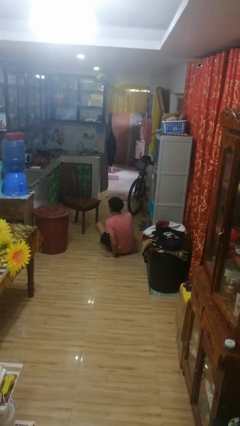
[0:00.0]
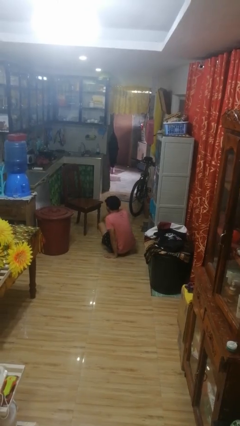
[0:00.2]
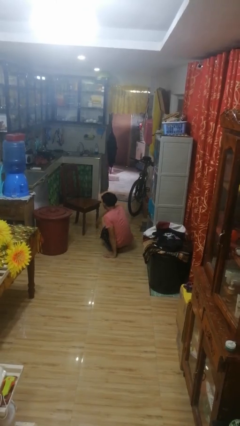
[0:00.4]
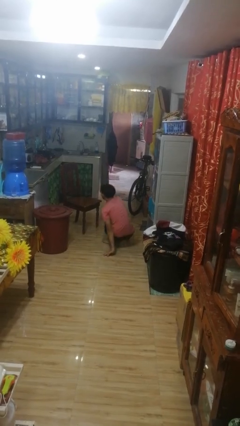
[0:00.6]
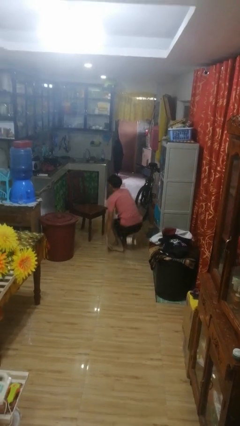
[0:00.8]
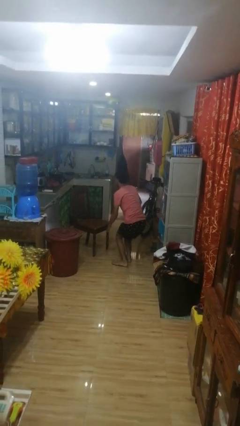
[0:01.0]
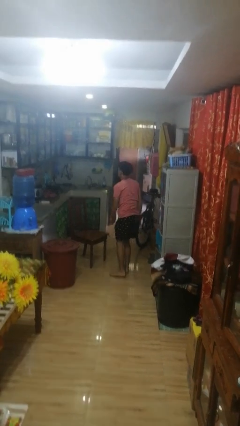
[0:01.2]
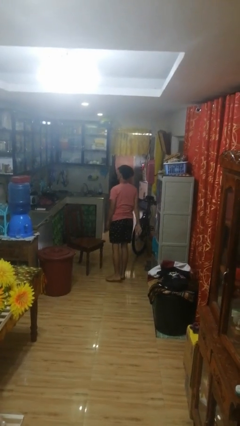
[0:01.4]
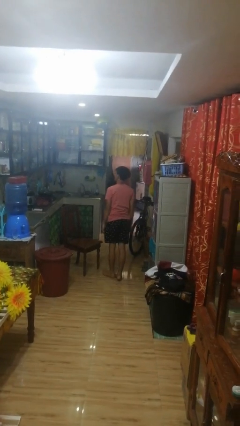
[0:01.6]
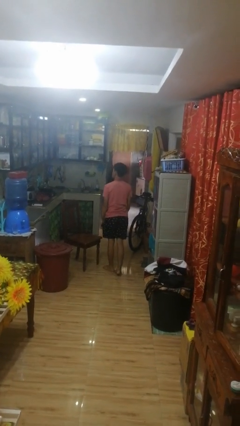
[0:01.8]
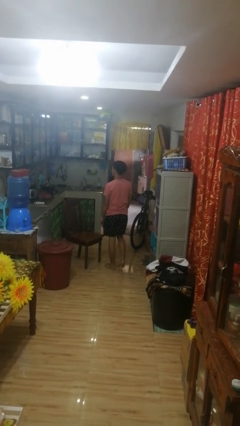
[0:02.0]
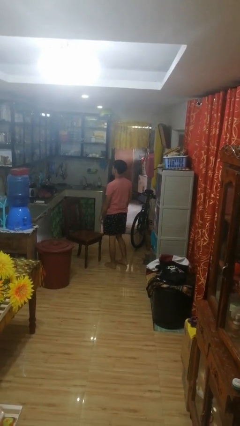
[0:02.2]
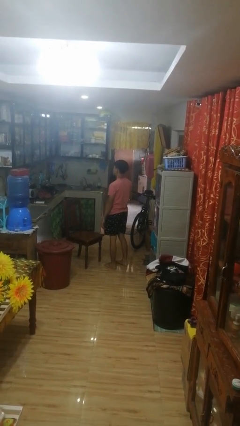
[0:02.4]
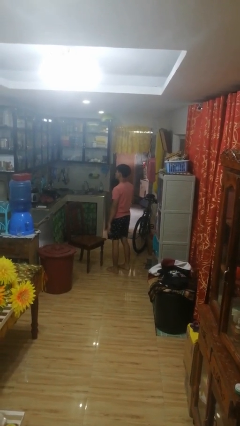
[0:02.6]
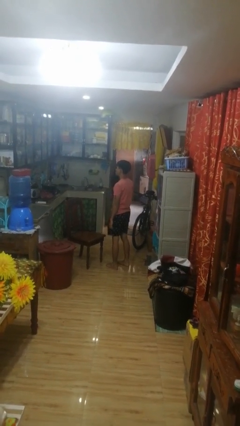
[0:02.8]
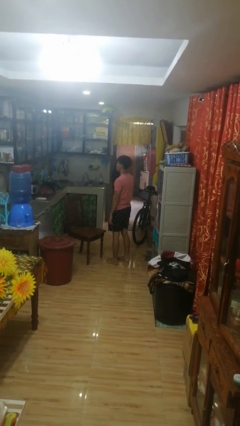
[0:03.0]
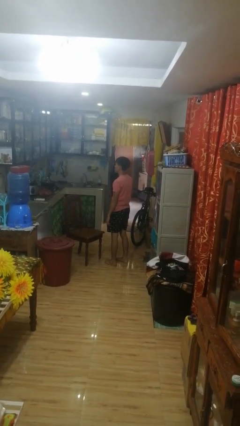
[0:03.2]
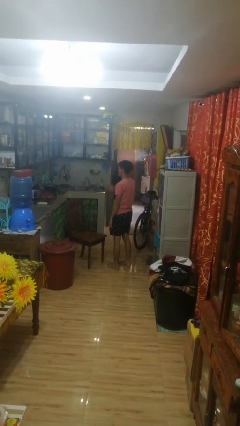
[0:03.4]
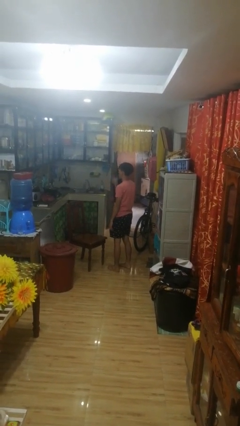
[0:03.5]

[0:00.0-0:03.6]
person stands up from floor

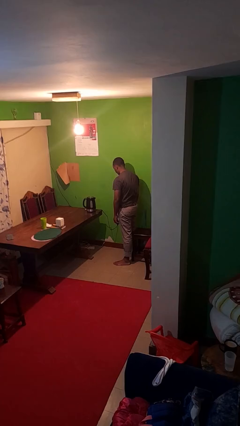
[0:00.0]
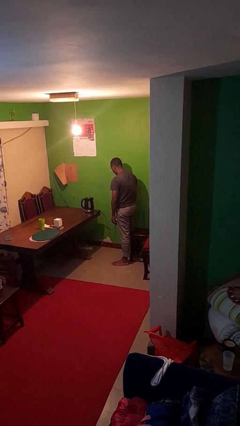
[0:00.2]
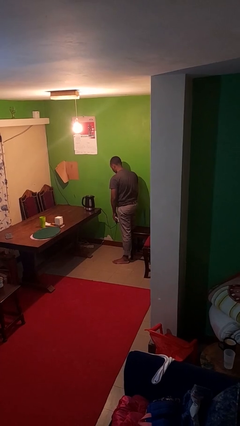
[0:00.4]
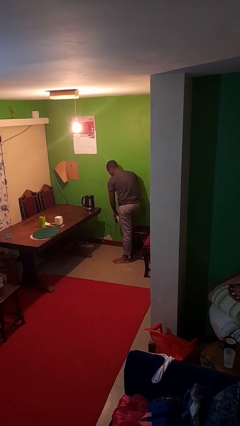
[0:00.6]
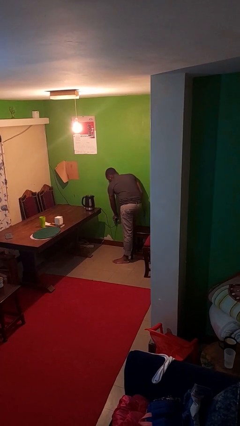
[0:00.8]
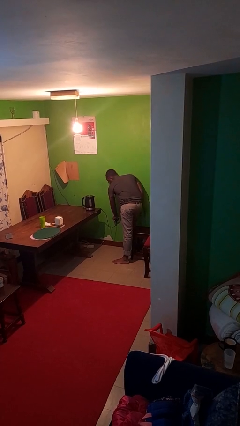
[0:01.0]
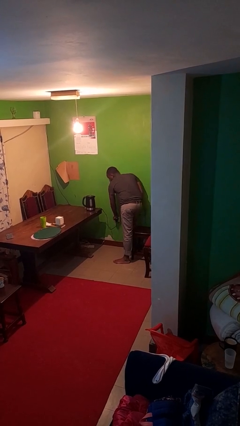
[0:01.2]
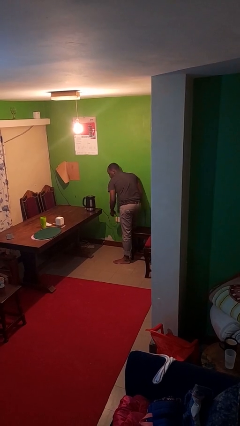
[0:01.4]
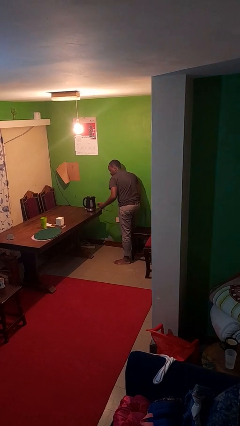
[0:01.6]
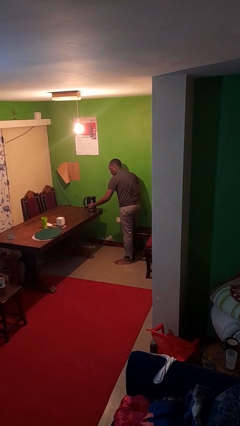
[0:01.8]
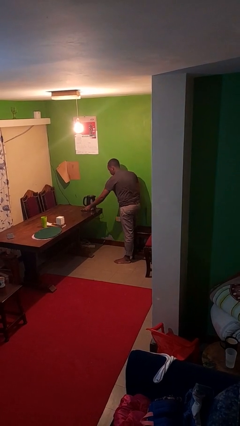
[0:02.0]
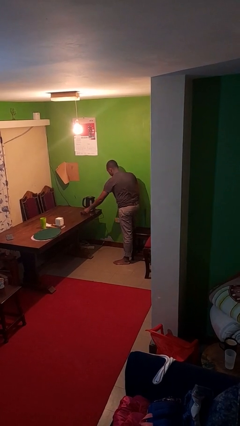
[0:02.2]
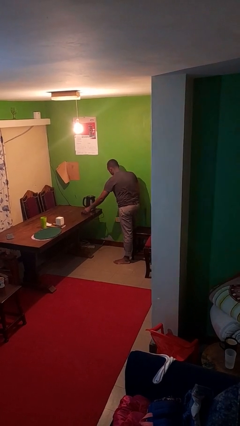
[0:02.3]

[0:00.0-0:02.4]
person unplugs from electrical socket

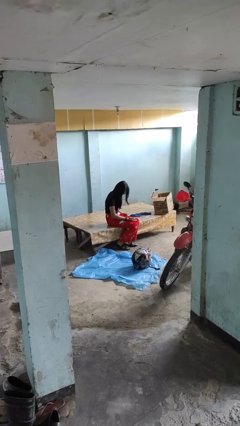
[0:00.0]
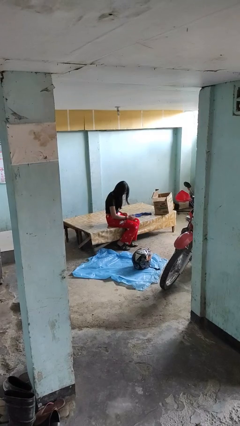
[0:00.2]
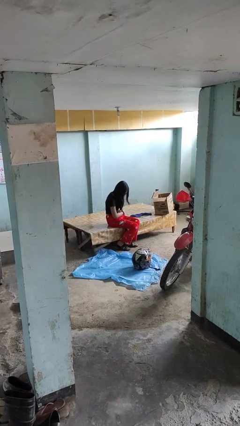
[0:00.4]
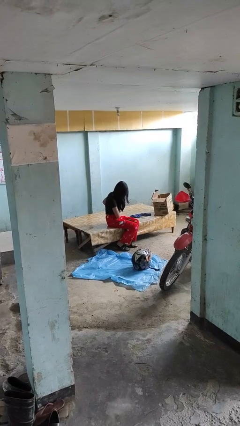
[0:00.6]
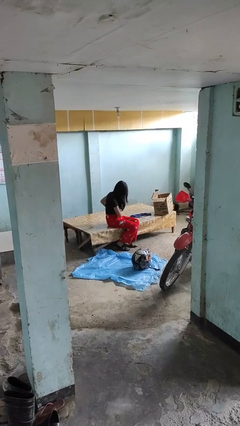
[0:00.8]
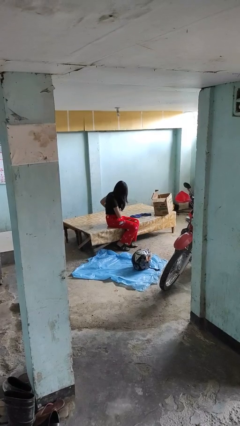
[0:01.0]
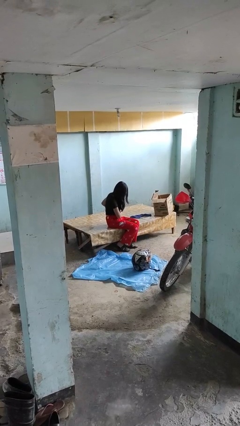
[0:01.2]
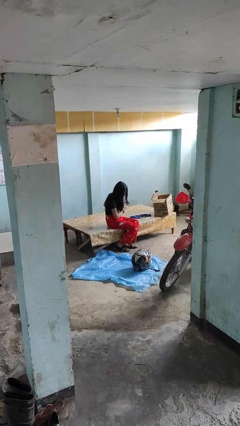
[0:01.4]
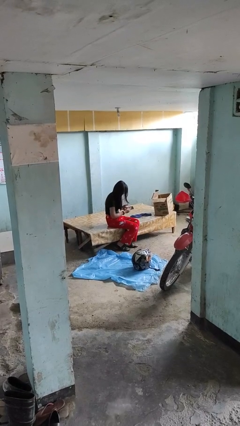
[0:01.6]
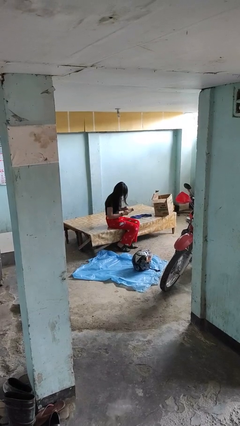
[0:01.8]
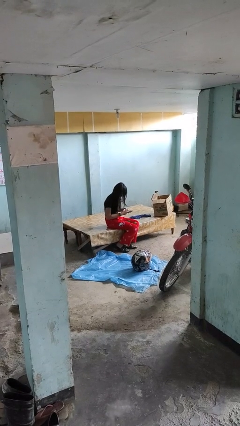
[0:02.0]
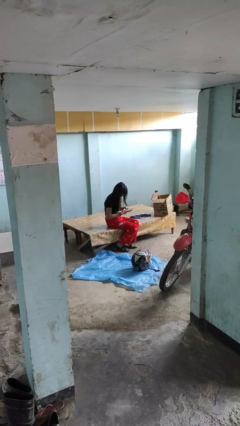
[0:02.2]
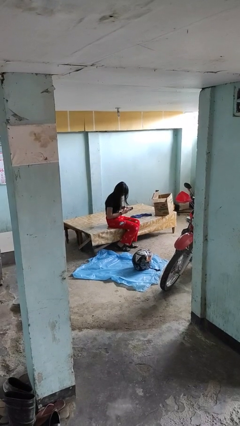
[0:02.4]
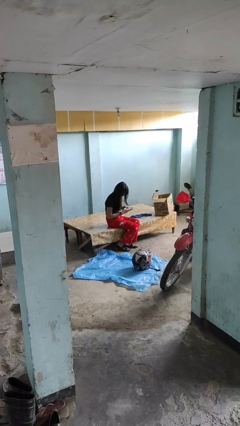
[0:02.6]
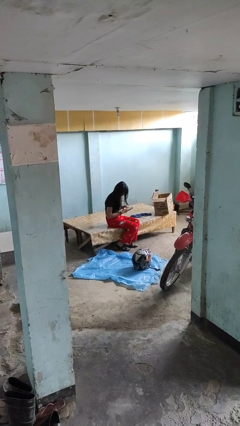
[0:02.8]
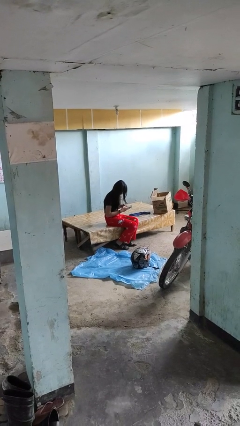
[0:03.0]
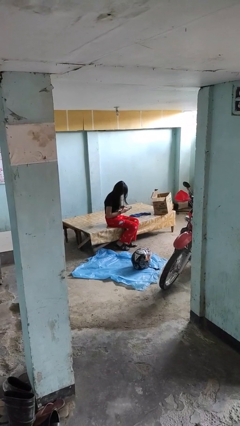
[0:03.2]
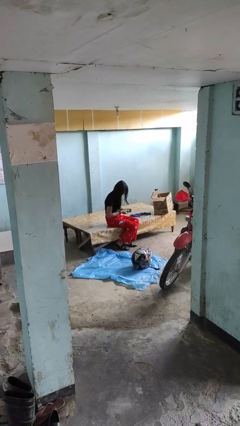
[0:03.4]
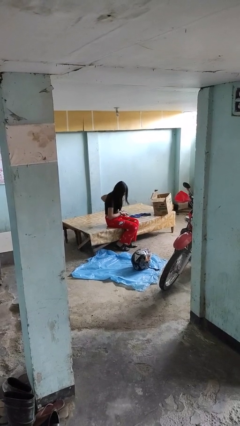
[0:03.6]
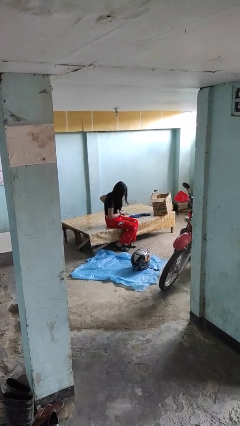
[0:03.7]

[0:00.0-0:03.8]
person takes phone from pocket

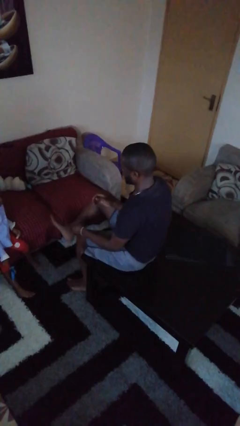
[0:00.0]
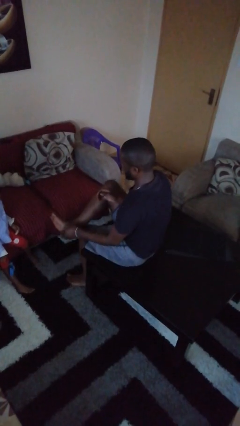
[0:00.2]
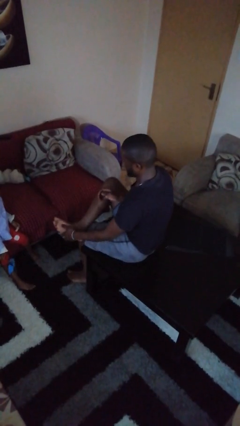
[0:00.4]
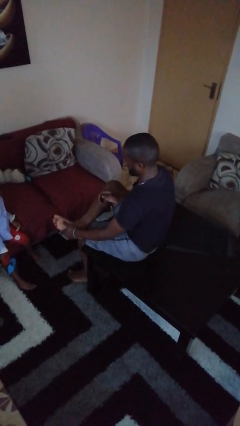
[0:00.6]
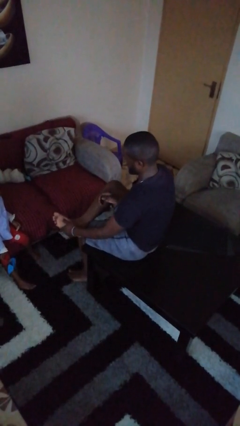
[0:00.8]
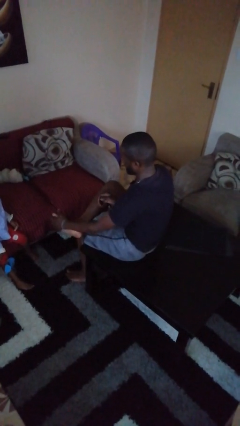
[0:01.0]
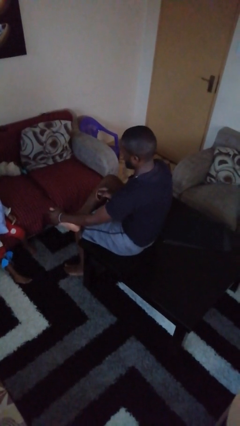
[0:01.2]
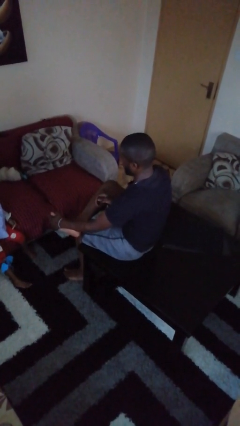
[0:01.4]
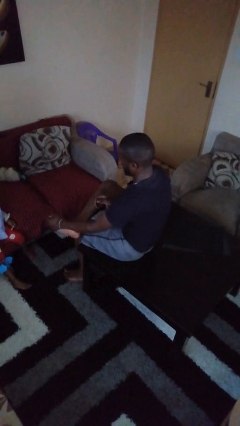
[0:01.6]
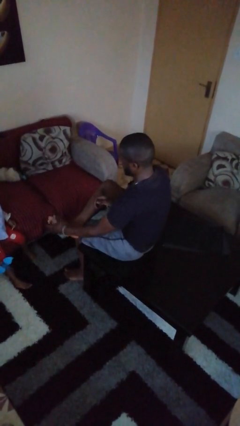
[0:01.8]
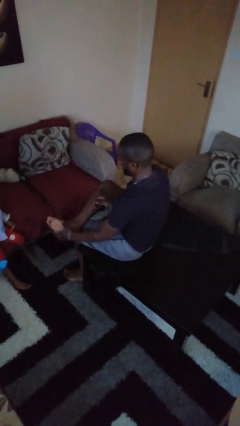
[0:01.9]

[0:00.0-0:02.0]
person rubs foot

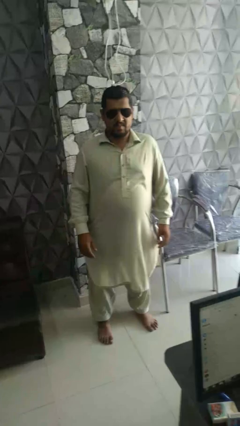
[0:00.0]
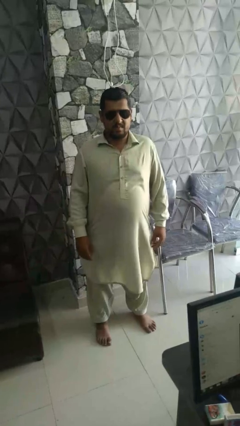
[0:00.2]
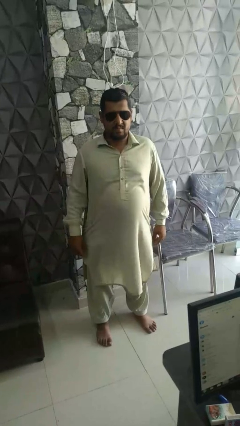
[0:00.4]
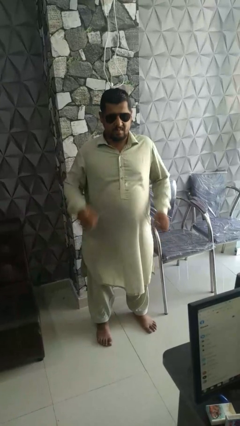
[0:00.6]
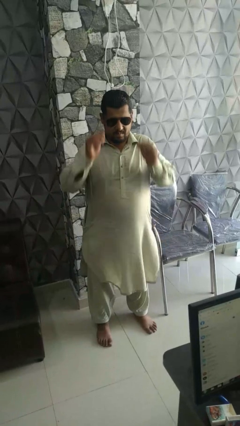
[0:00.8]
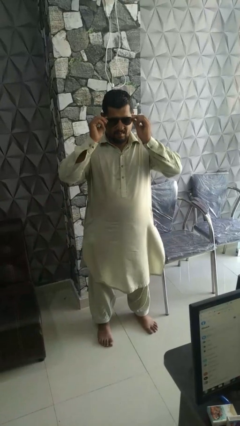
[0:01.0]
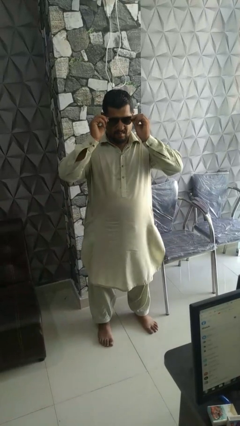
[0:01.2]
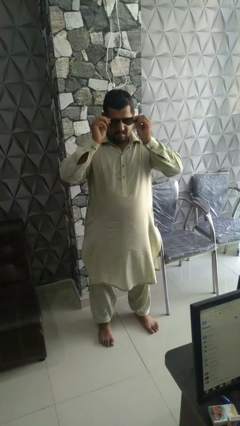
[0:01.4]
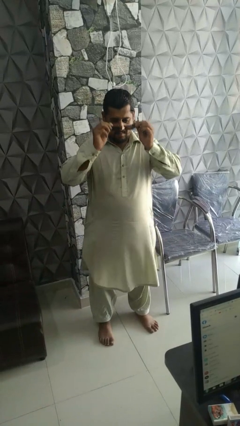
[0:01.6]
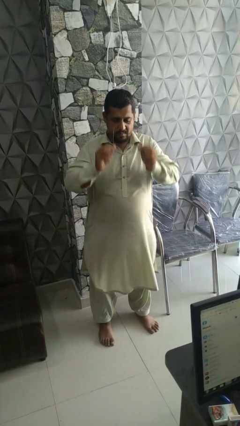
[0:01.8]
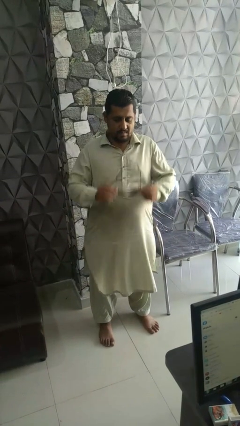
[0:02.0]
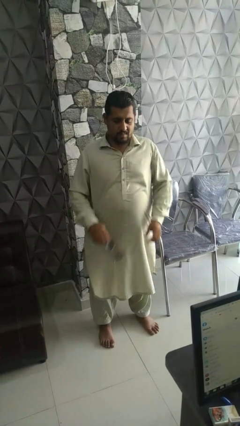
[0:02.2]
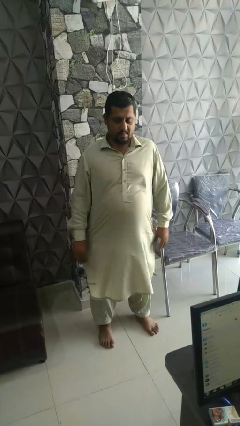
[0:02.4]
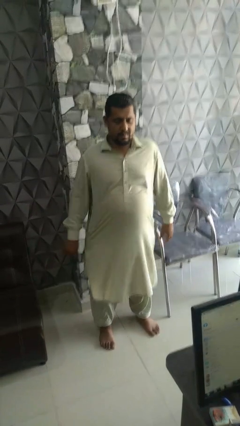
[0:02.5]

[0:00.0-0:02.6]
person takes off sunglasses

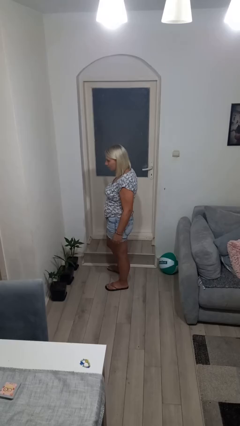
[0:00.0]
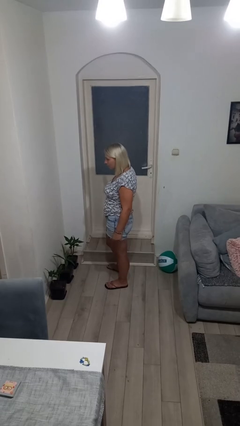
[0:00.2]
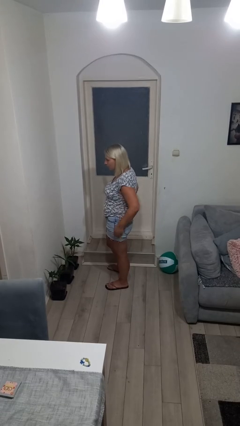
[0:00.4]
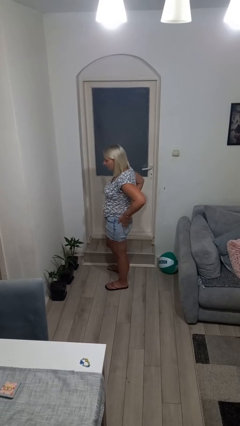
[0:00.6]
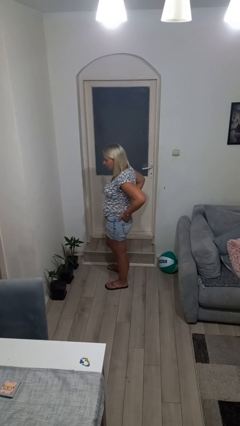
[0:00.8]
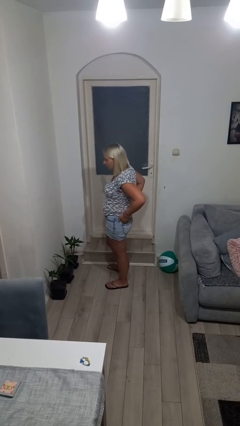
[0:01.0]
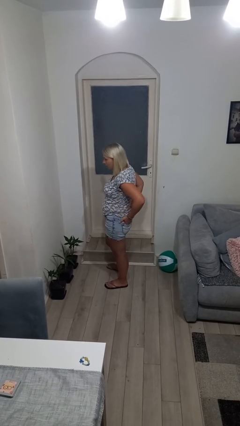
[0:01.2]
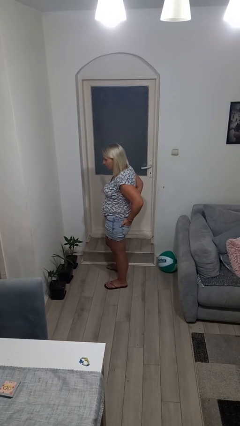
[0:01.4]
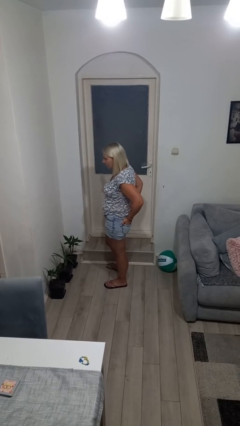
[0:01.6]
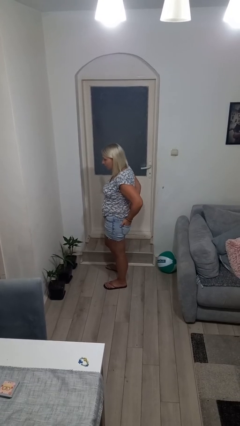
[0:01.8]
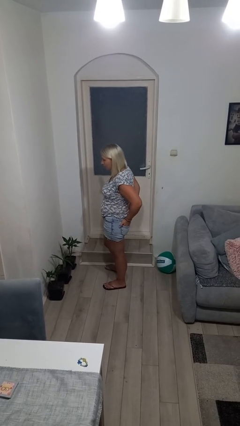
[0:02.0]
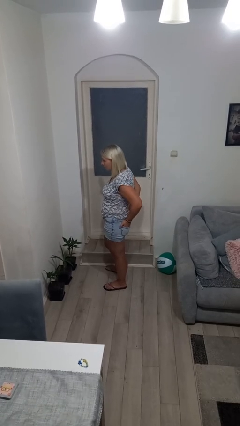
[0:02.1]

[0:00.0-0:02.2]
person puts hands in back pockets

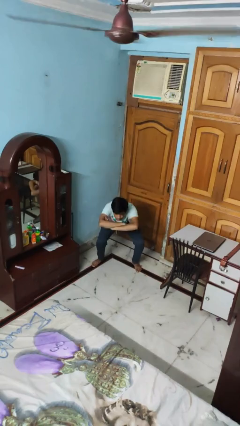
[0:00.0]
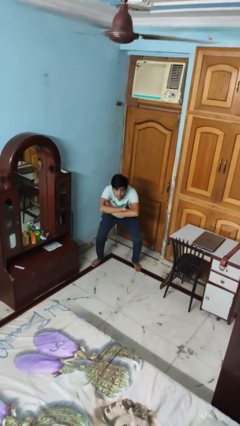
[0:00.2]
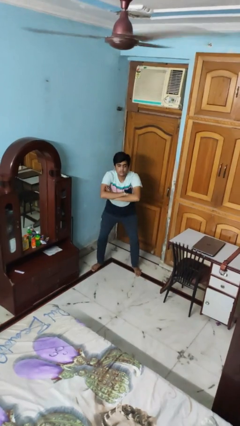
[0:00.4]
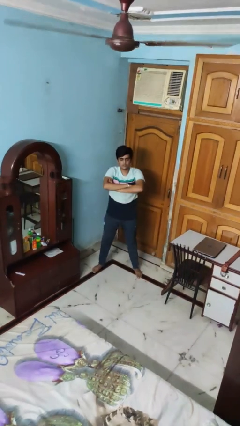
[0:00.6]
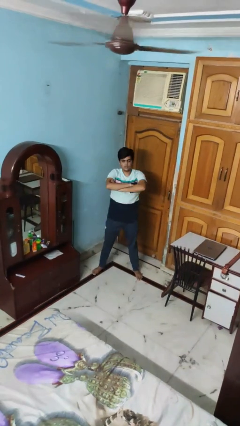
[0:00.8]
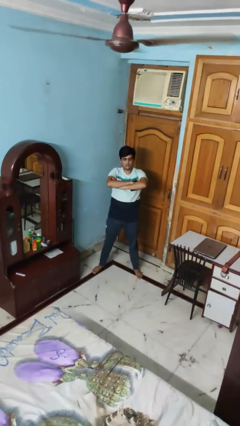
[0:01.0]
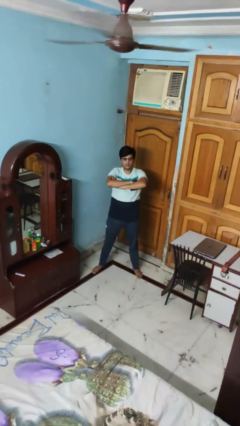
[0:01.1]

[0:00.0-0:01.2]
person stands up
